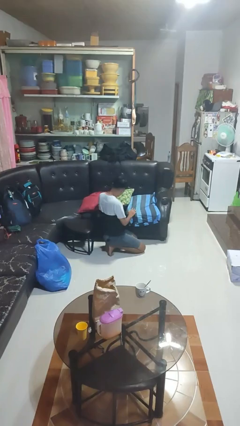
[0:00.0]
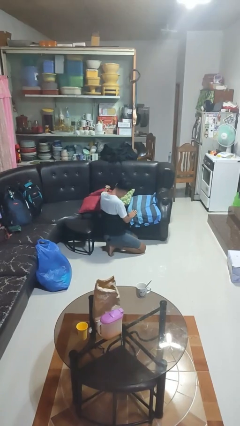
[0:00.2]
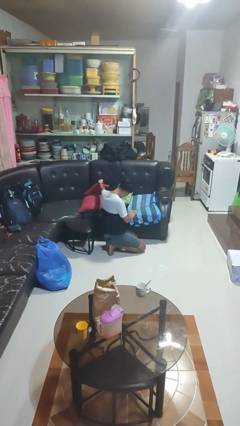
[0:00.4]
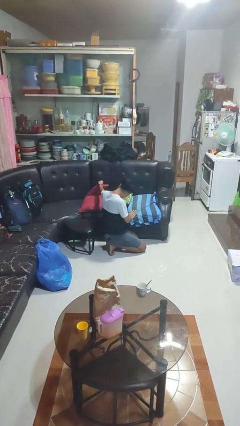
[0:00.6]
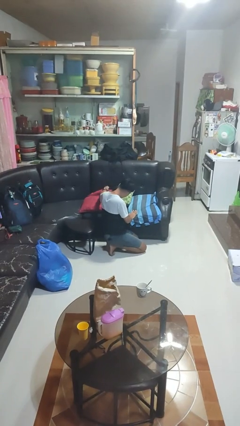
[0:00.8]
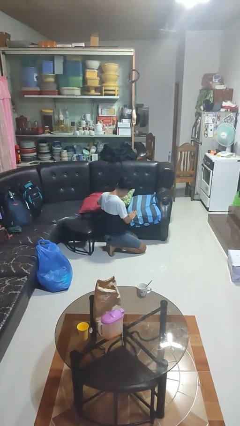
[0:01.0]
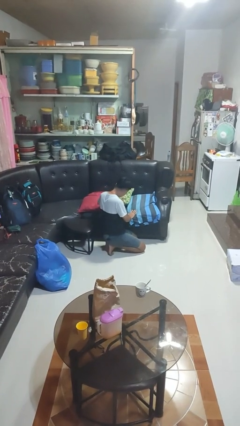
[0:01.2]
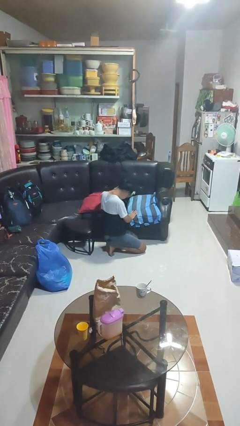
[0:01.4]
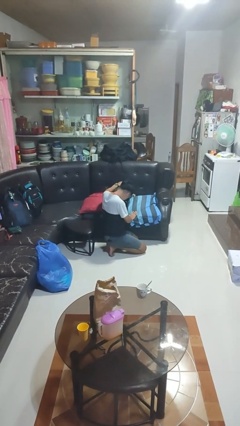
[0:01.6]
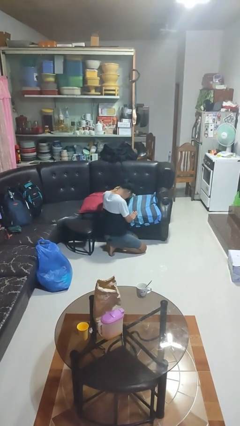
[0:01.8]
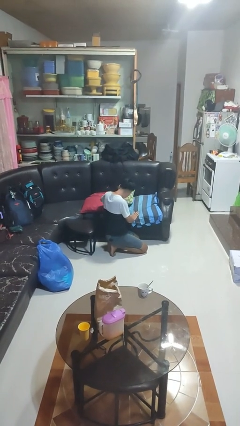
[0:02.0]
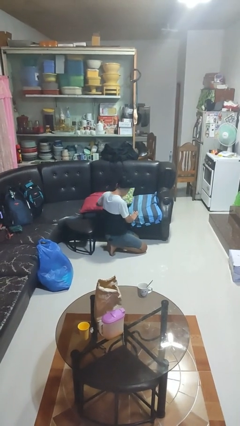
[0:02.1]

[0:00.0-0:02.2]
person searches in couch

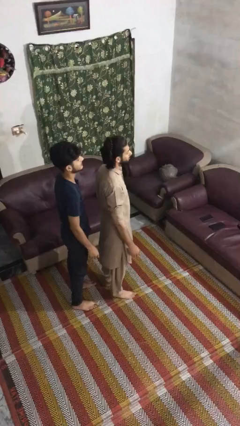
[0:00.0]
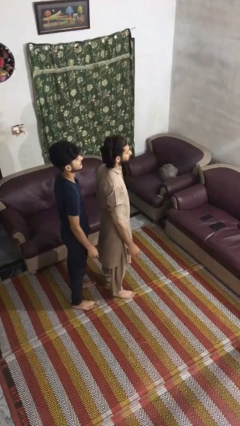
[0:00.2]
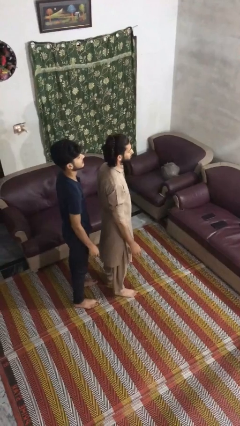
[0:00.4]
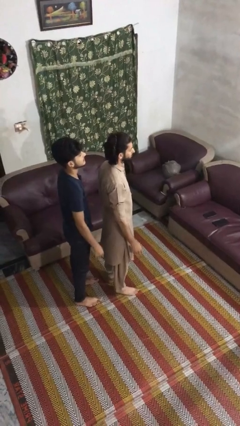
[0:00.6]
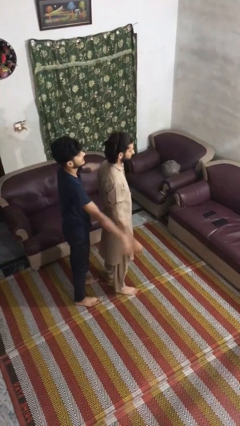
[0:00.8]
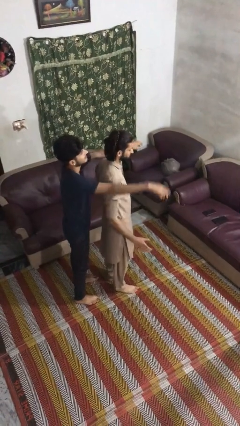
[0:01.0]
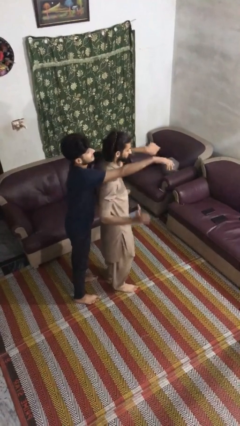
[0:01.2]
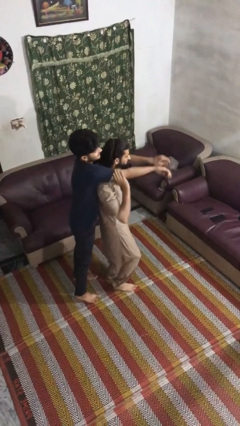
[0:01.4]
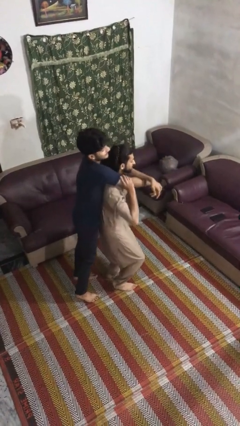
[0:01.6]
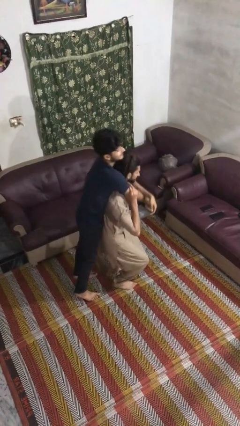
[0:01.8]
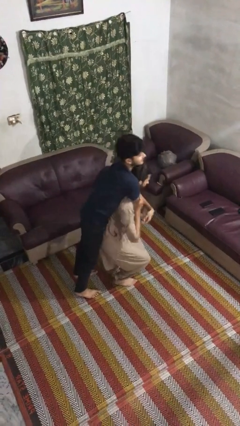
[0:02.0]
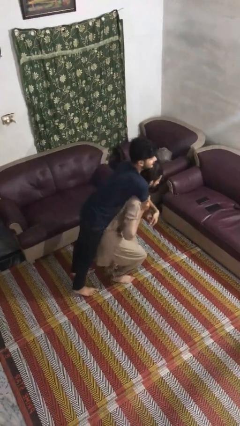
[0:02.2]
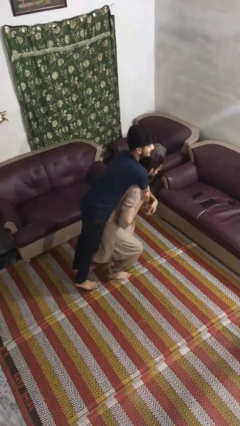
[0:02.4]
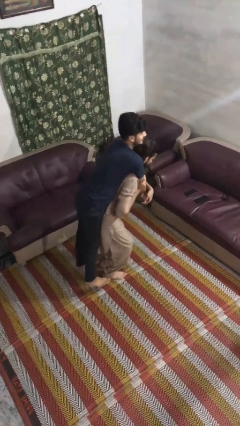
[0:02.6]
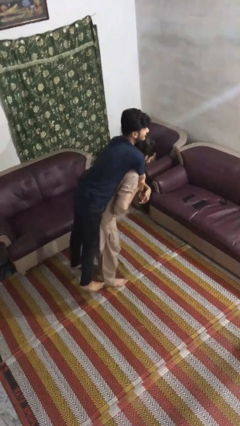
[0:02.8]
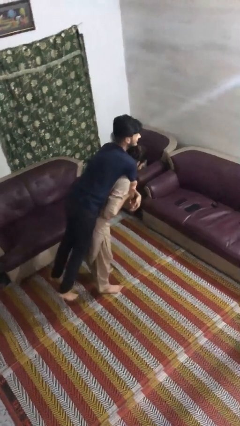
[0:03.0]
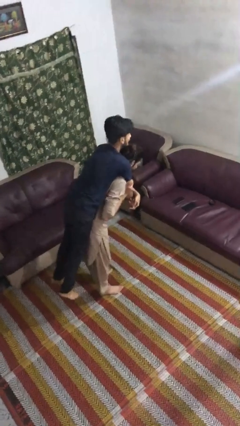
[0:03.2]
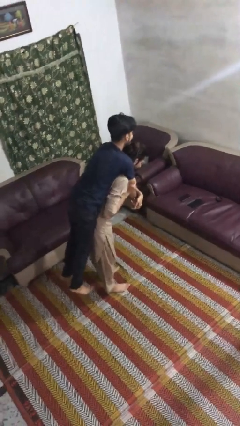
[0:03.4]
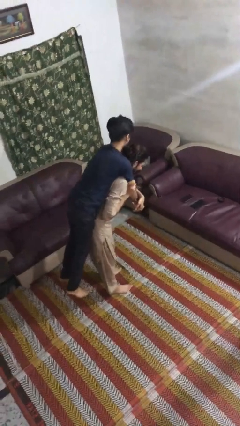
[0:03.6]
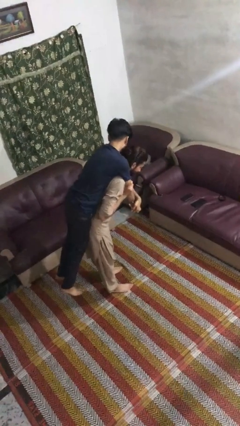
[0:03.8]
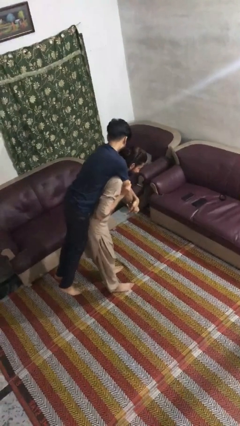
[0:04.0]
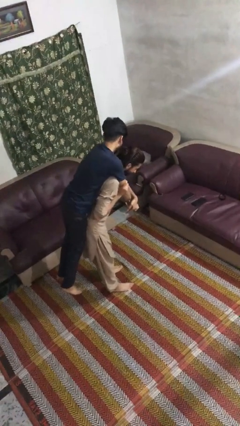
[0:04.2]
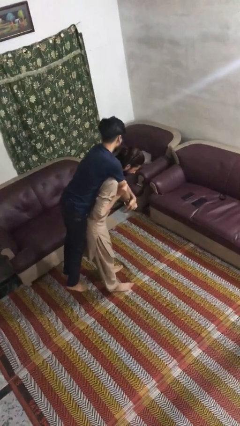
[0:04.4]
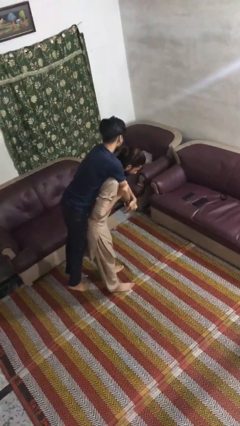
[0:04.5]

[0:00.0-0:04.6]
person carries person over shoulder

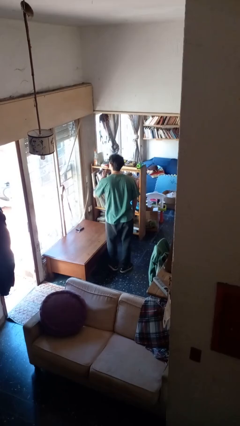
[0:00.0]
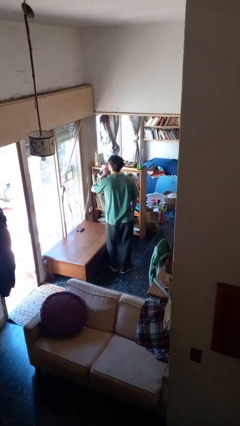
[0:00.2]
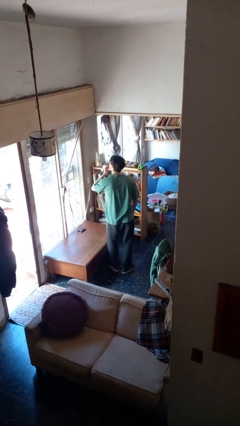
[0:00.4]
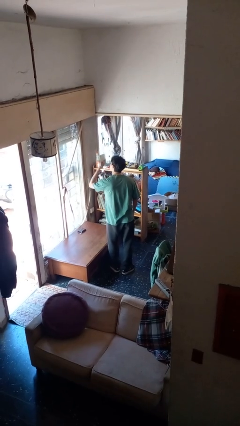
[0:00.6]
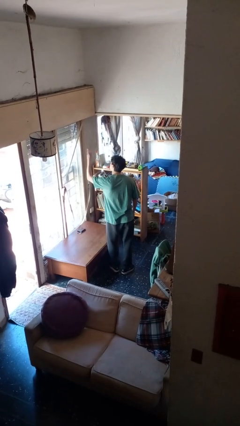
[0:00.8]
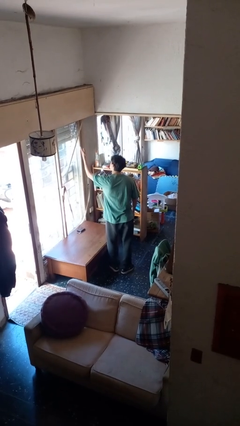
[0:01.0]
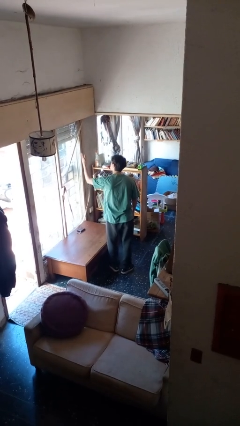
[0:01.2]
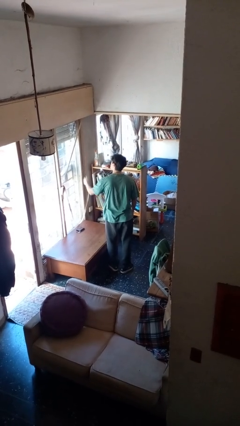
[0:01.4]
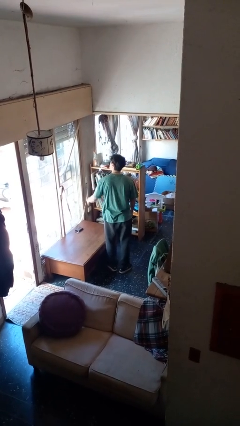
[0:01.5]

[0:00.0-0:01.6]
person gestures blow kiss

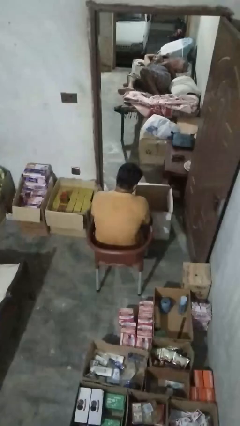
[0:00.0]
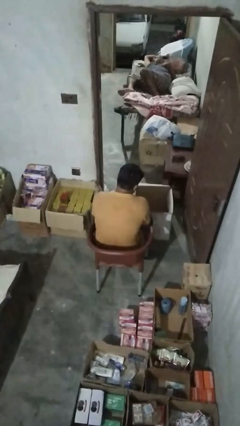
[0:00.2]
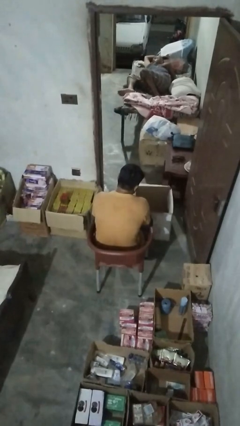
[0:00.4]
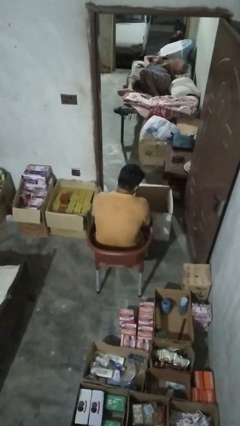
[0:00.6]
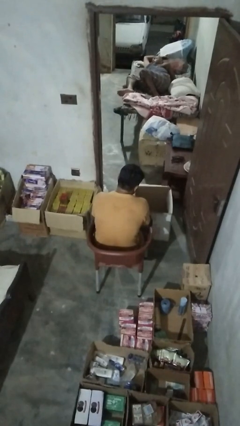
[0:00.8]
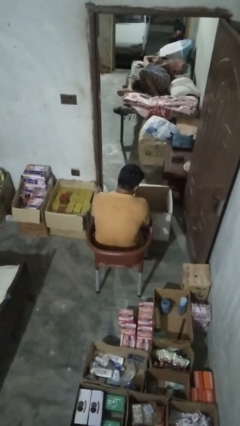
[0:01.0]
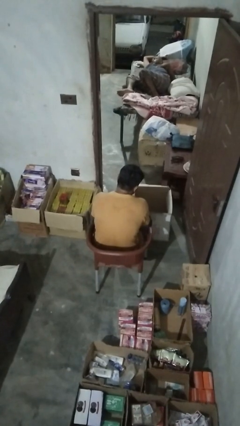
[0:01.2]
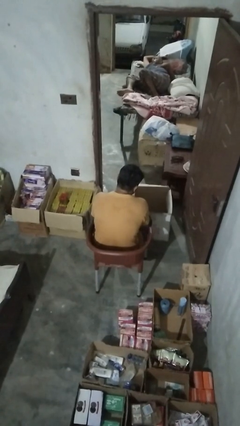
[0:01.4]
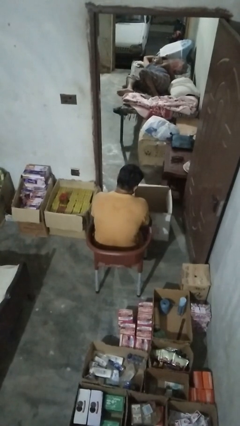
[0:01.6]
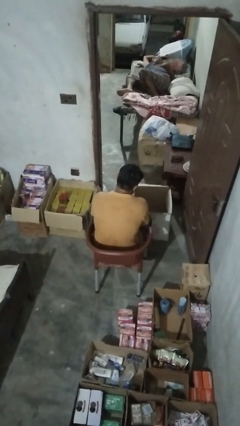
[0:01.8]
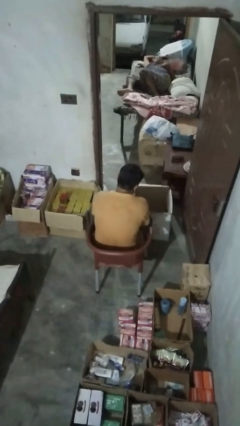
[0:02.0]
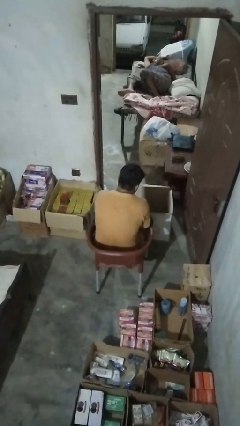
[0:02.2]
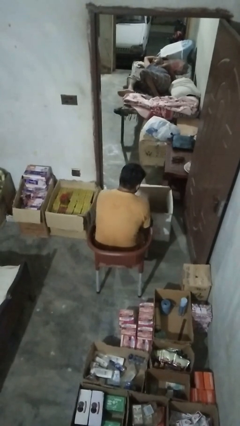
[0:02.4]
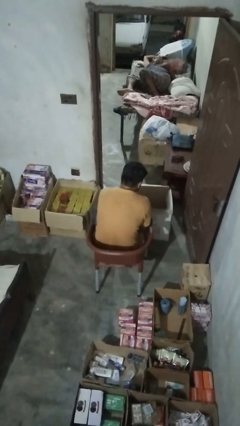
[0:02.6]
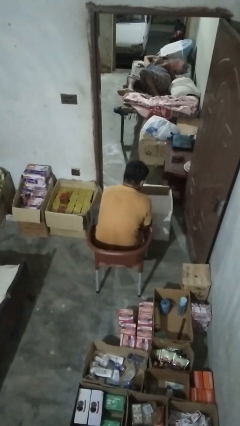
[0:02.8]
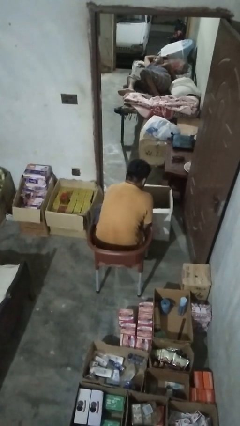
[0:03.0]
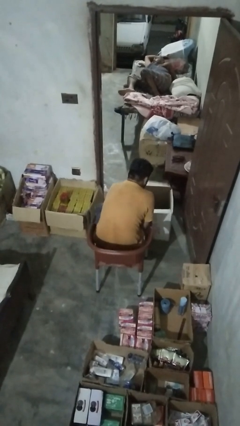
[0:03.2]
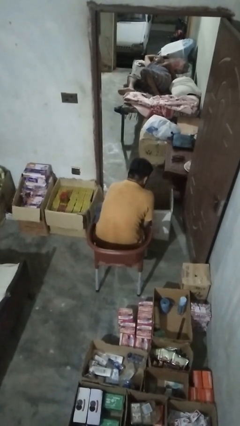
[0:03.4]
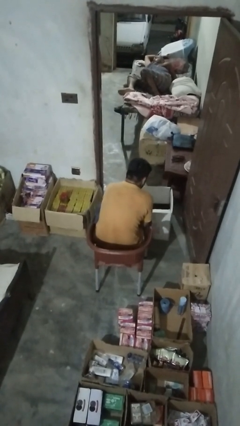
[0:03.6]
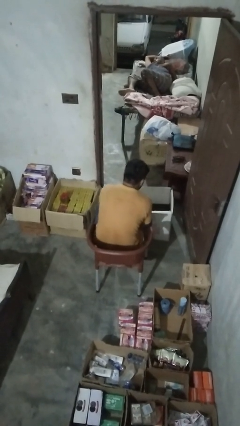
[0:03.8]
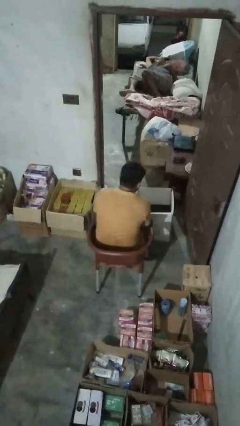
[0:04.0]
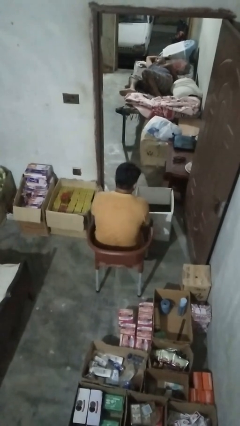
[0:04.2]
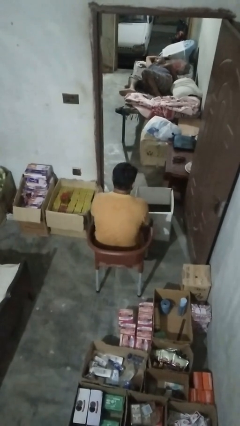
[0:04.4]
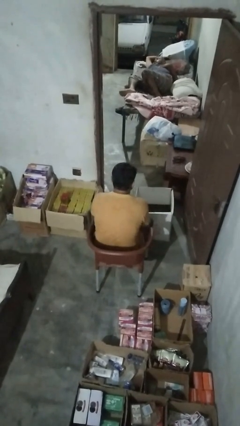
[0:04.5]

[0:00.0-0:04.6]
person opens box

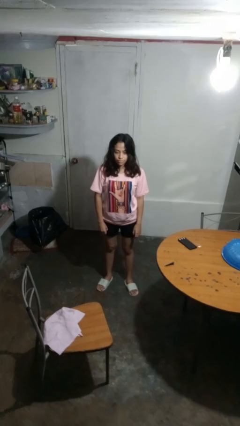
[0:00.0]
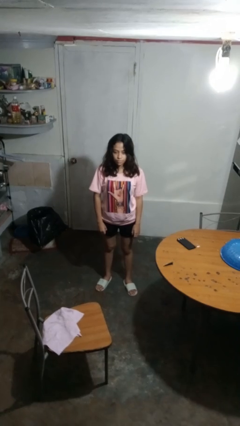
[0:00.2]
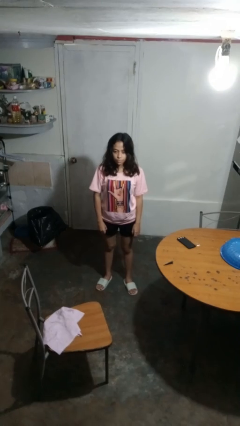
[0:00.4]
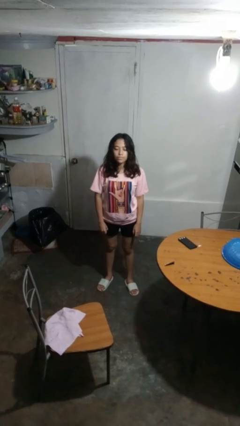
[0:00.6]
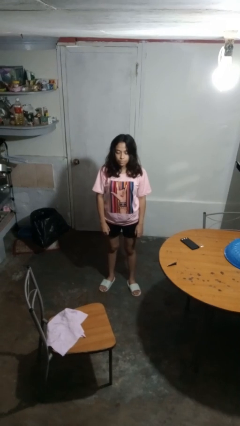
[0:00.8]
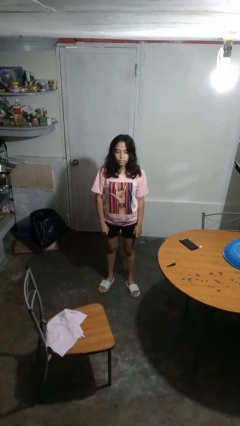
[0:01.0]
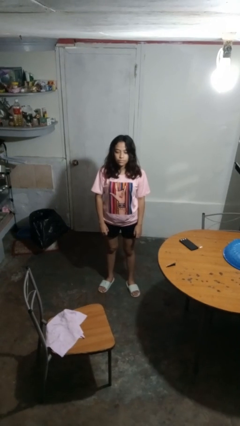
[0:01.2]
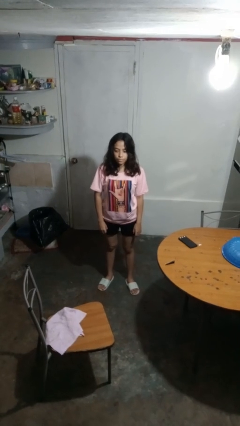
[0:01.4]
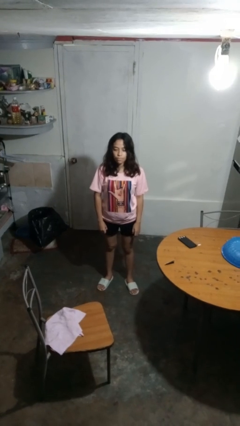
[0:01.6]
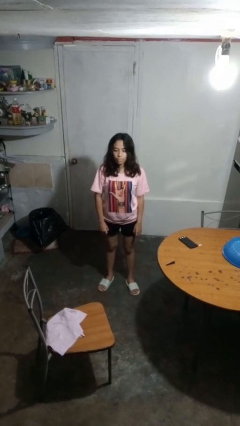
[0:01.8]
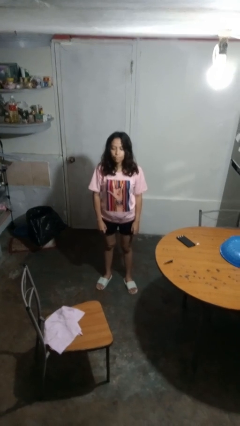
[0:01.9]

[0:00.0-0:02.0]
person nods head

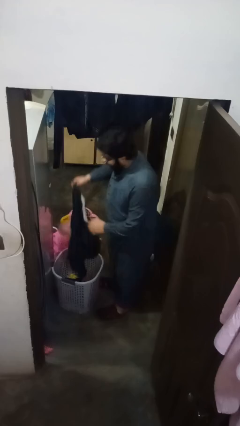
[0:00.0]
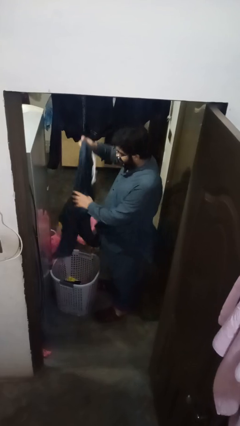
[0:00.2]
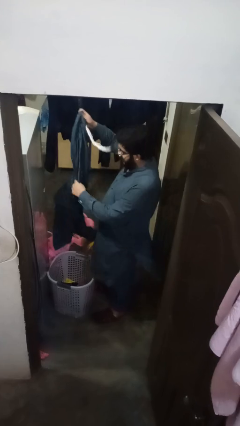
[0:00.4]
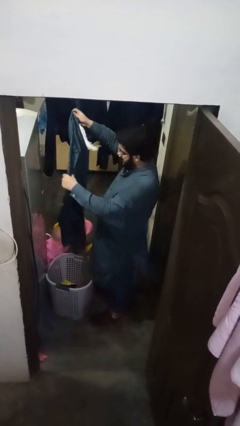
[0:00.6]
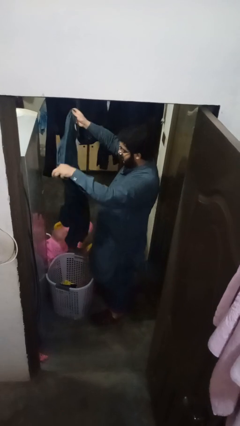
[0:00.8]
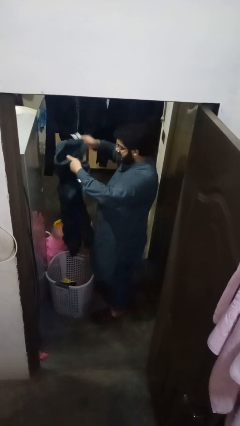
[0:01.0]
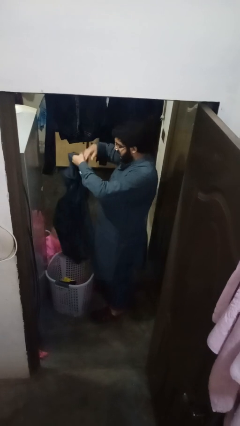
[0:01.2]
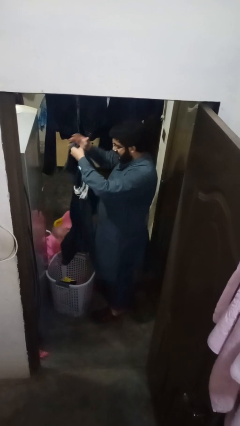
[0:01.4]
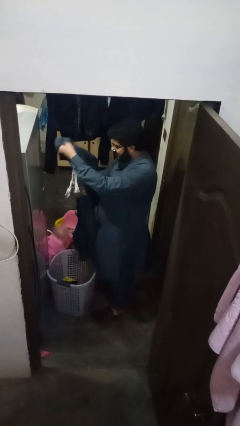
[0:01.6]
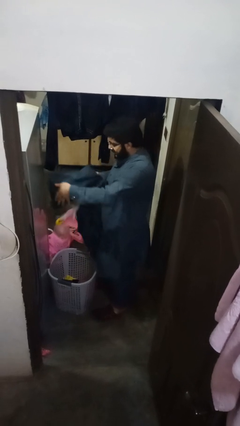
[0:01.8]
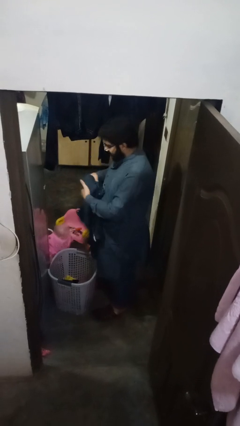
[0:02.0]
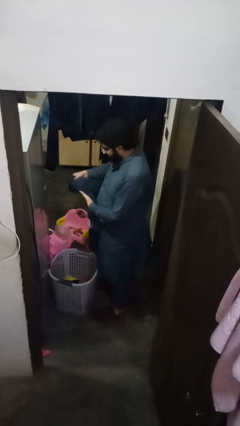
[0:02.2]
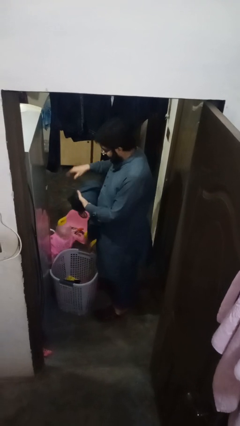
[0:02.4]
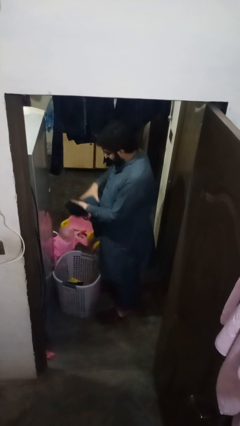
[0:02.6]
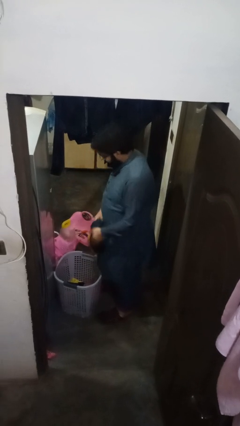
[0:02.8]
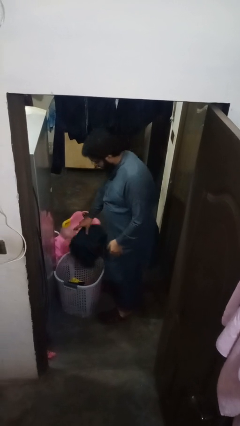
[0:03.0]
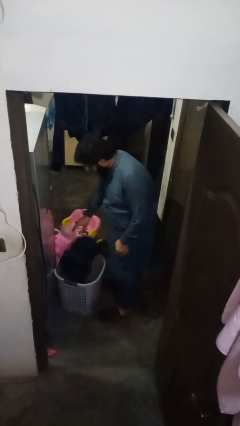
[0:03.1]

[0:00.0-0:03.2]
person folds pants
